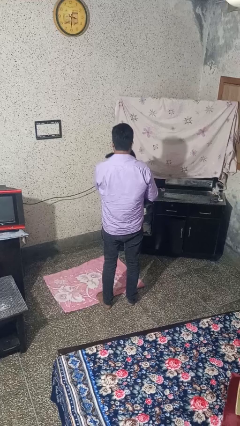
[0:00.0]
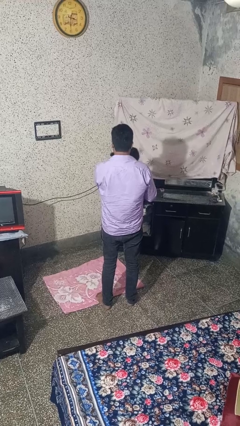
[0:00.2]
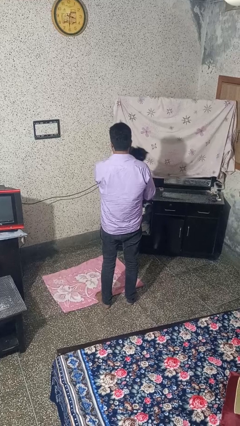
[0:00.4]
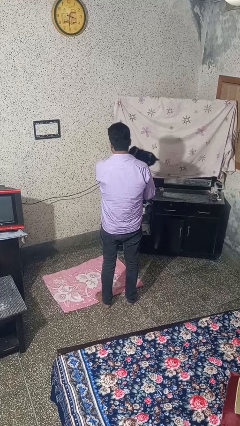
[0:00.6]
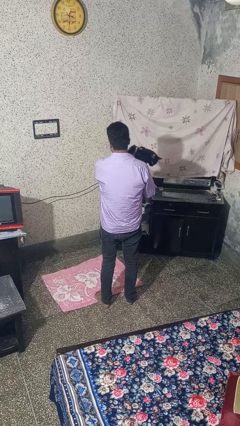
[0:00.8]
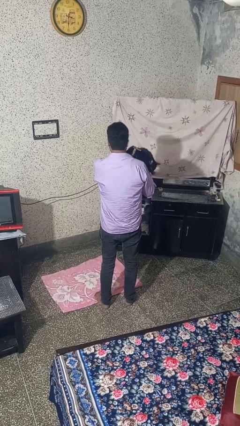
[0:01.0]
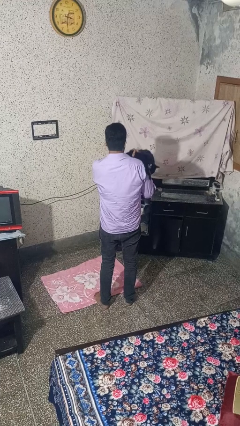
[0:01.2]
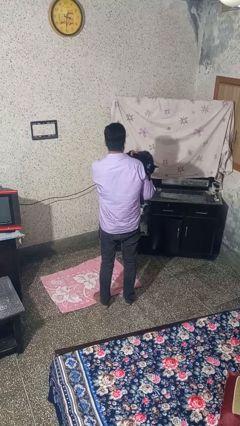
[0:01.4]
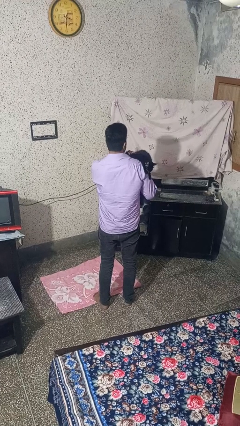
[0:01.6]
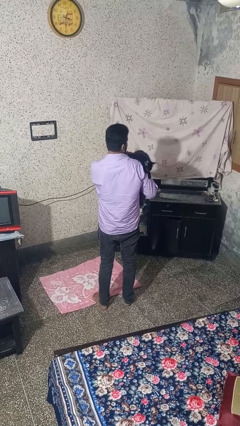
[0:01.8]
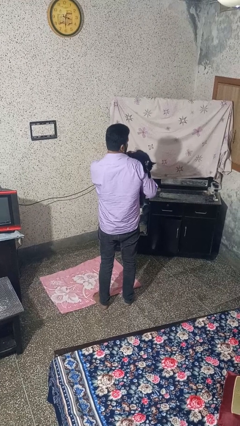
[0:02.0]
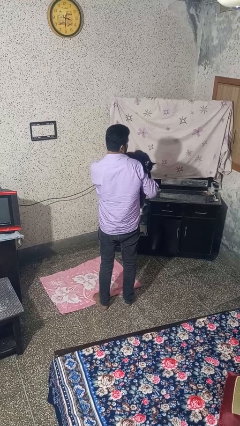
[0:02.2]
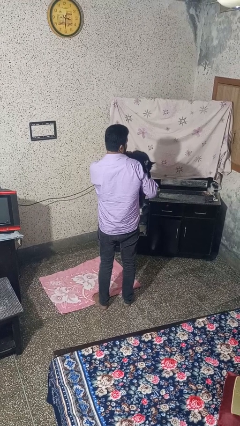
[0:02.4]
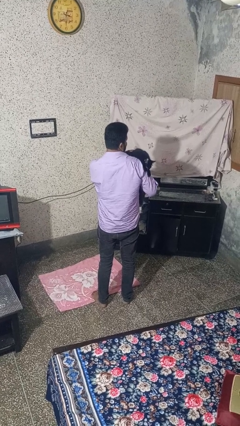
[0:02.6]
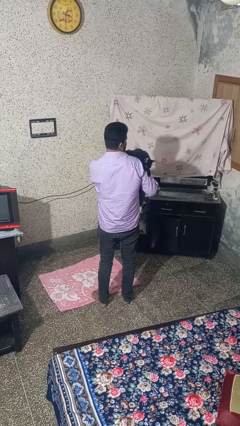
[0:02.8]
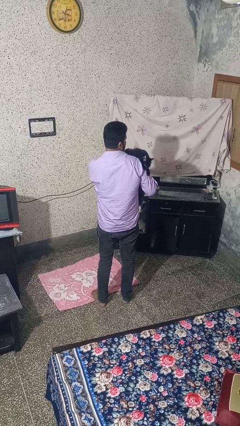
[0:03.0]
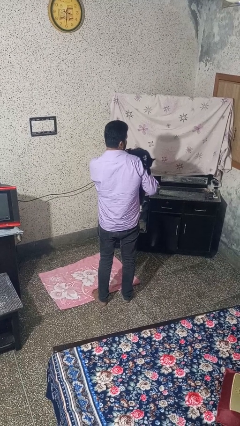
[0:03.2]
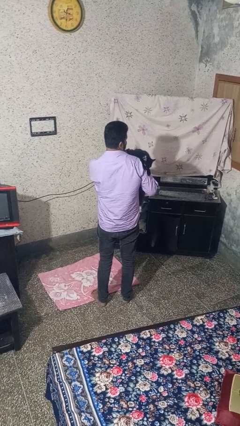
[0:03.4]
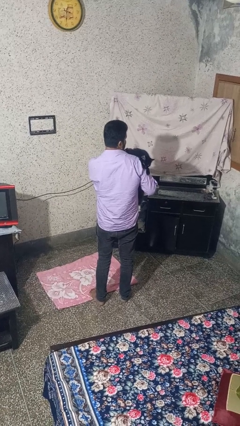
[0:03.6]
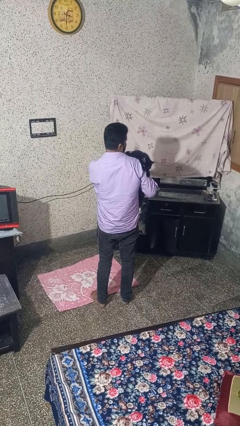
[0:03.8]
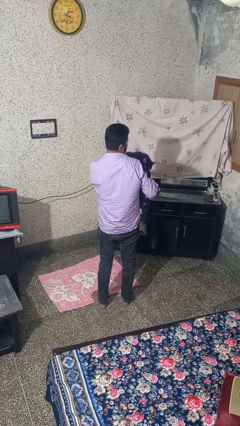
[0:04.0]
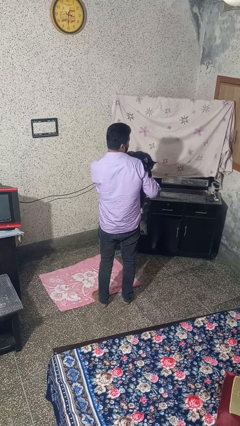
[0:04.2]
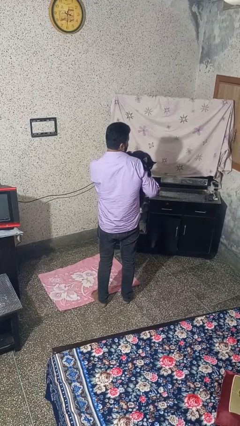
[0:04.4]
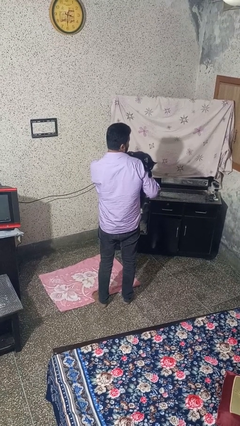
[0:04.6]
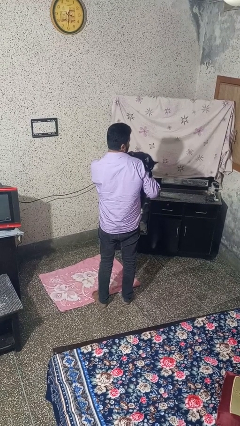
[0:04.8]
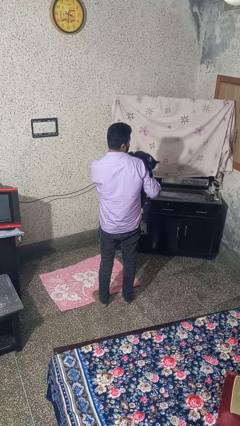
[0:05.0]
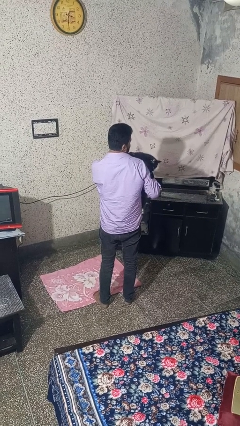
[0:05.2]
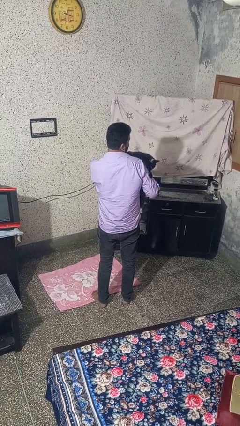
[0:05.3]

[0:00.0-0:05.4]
person hugs cat

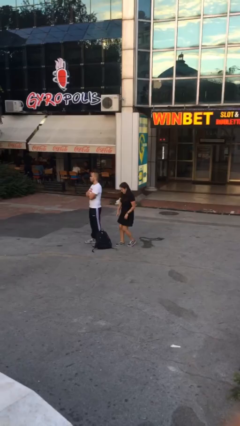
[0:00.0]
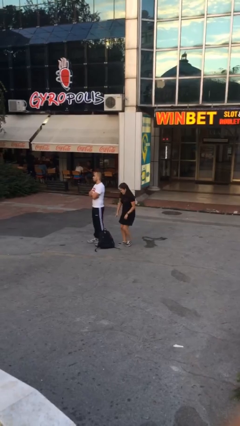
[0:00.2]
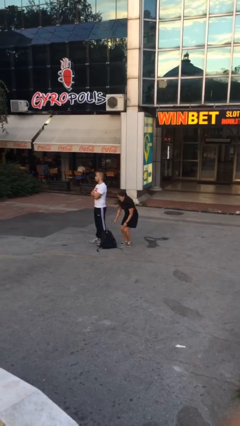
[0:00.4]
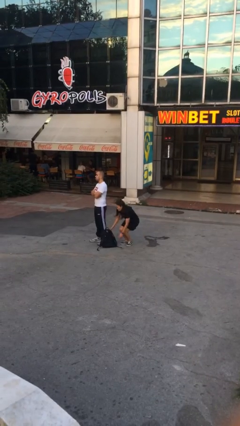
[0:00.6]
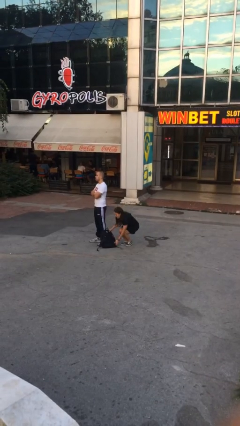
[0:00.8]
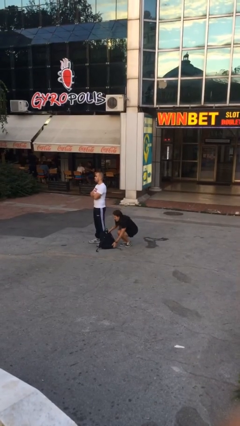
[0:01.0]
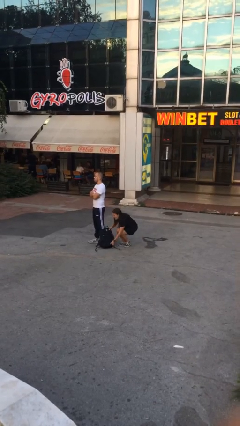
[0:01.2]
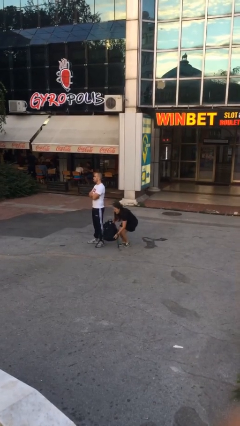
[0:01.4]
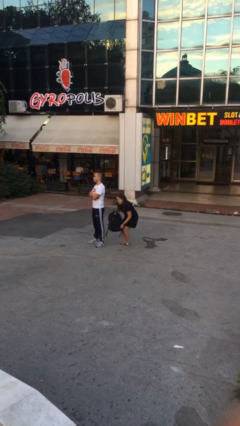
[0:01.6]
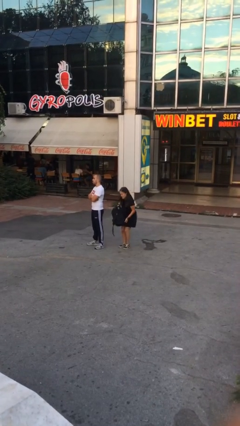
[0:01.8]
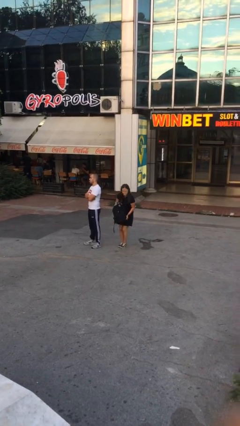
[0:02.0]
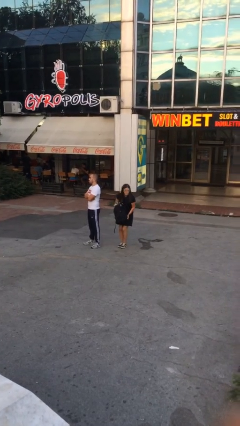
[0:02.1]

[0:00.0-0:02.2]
person steals object from person

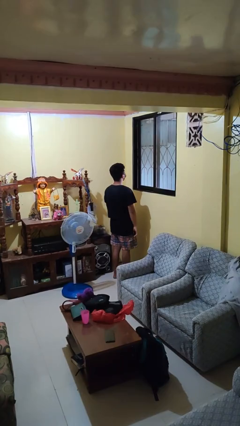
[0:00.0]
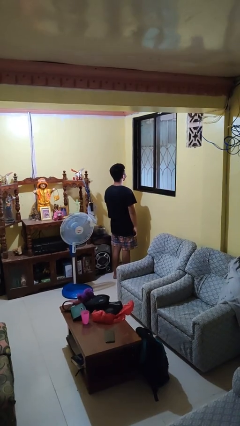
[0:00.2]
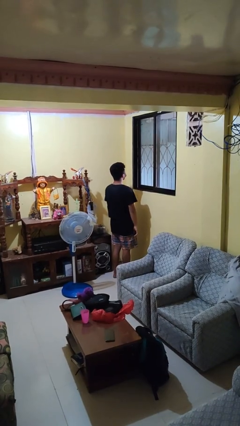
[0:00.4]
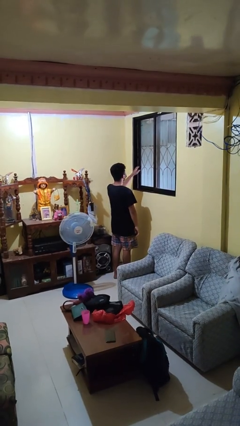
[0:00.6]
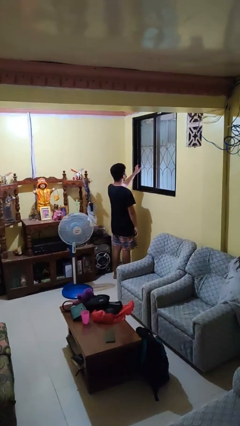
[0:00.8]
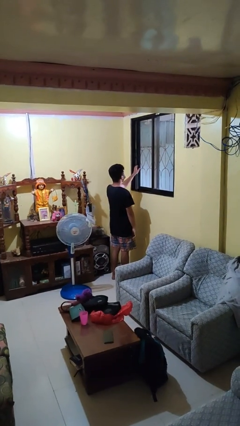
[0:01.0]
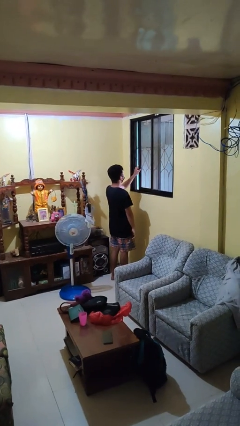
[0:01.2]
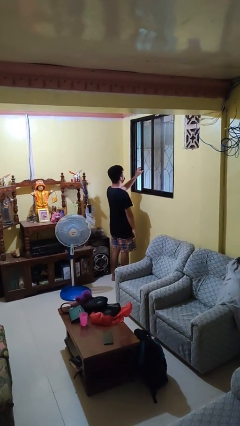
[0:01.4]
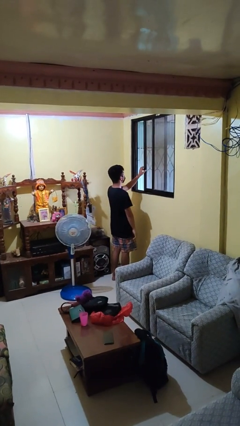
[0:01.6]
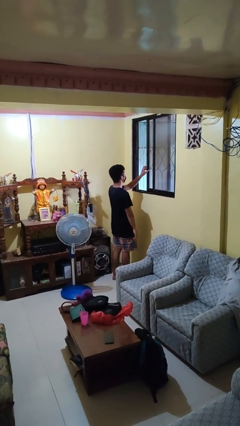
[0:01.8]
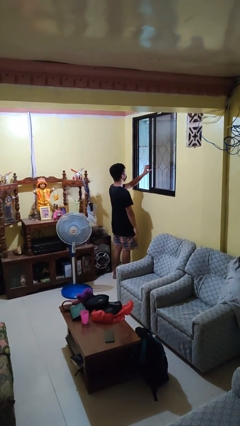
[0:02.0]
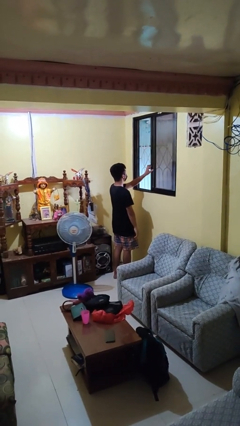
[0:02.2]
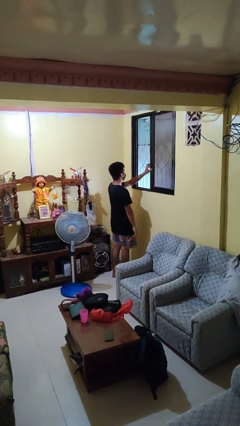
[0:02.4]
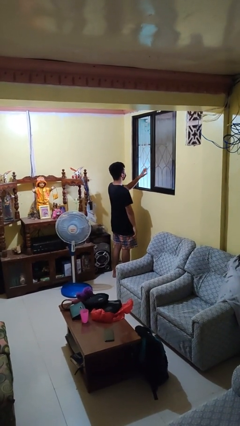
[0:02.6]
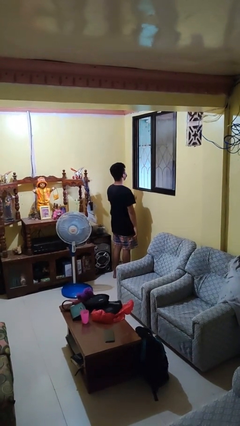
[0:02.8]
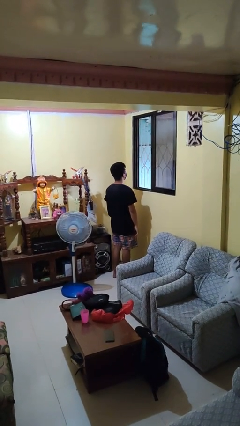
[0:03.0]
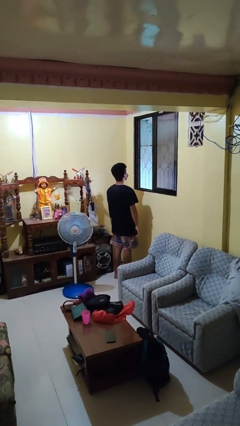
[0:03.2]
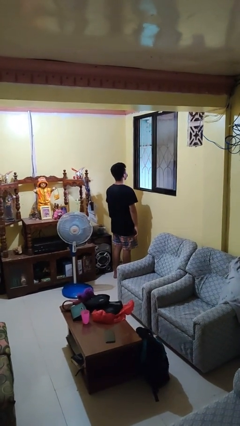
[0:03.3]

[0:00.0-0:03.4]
person opens home window

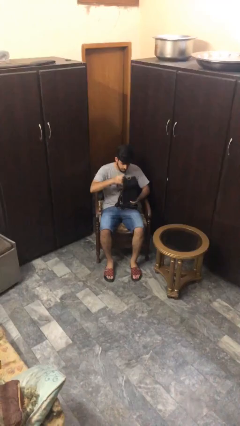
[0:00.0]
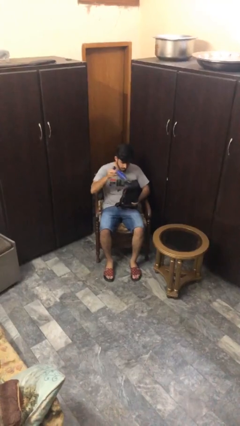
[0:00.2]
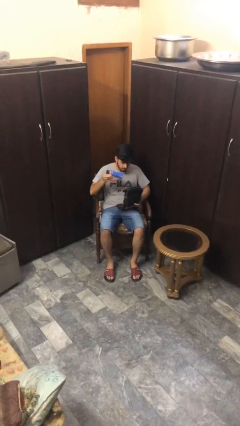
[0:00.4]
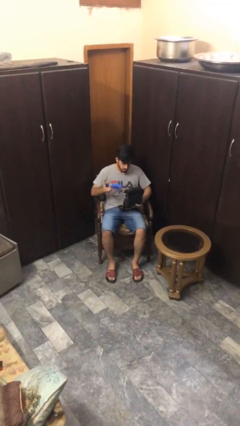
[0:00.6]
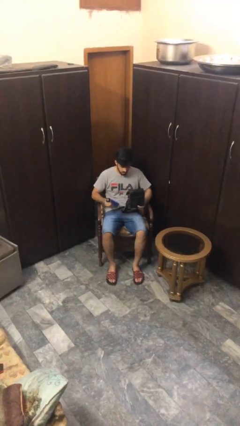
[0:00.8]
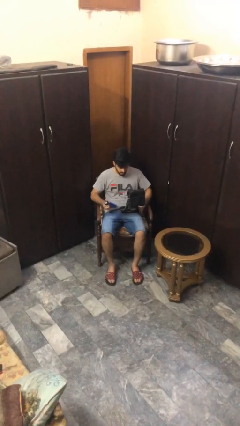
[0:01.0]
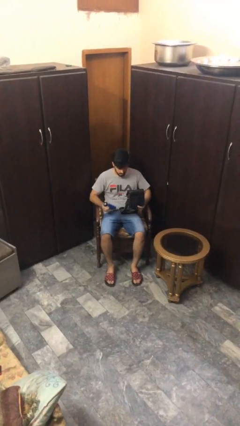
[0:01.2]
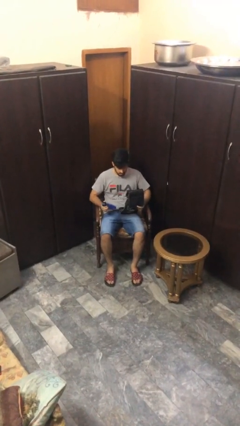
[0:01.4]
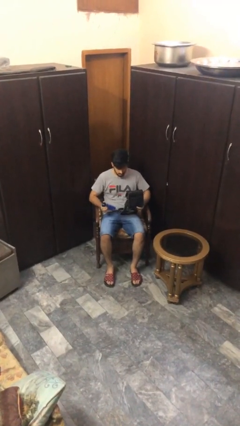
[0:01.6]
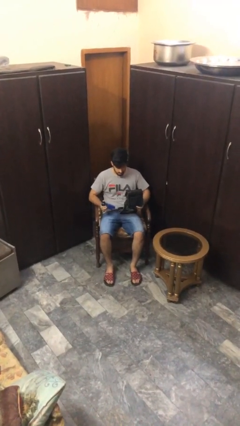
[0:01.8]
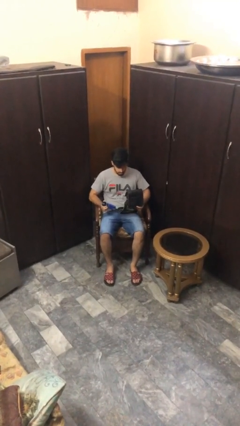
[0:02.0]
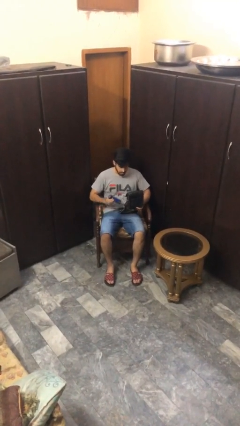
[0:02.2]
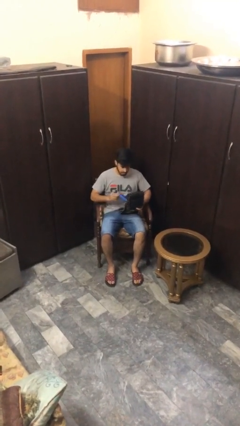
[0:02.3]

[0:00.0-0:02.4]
person takes object from purse

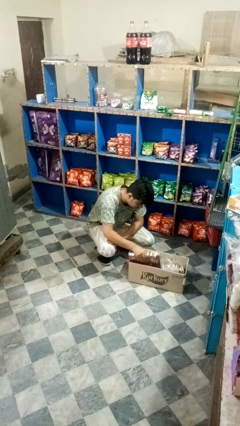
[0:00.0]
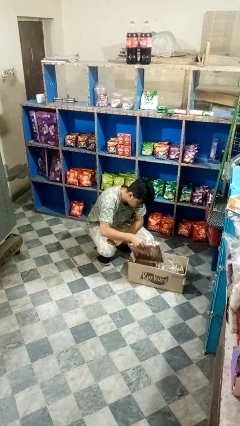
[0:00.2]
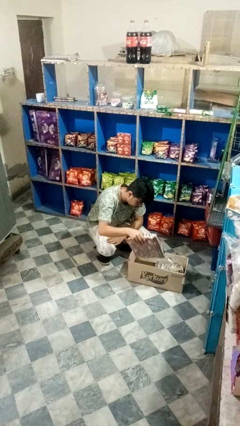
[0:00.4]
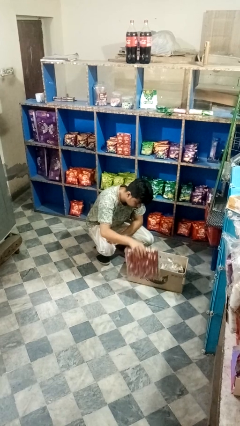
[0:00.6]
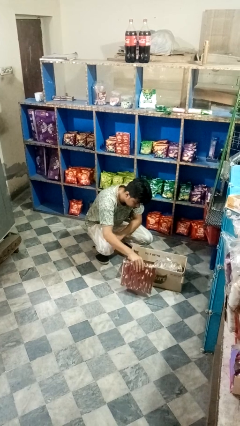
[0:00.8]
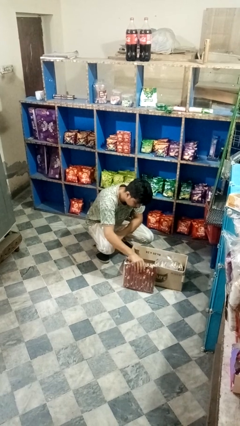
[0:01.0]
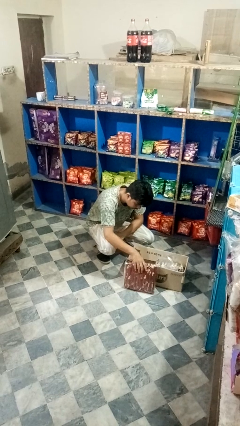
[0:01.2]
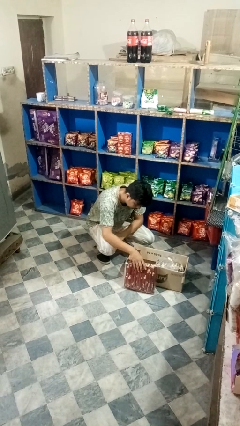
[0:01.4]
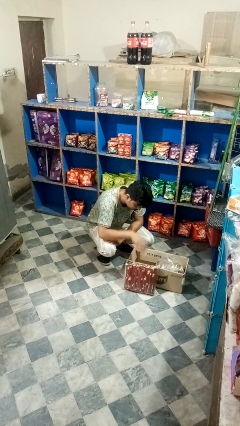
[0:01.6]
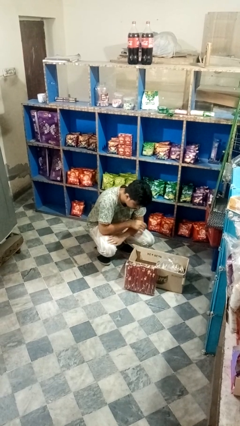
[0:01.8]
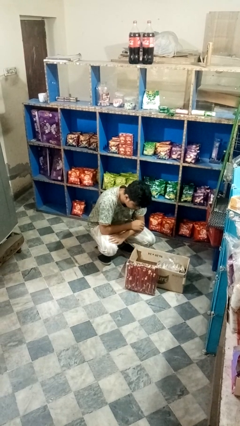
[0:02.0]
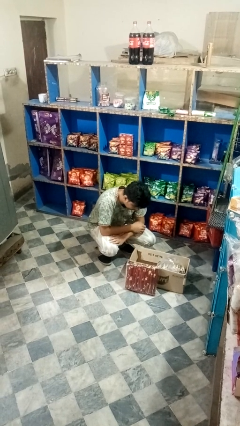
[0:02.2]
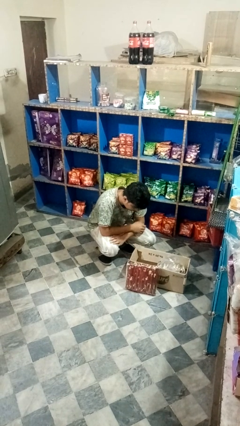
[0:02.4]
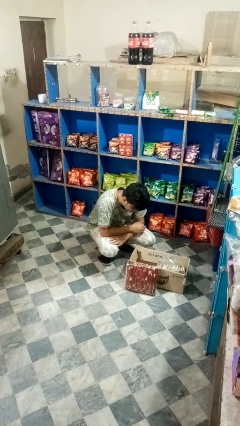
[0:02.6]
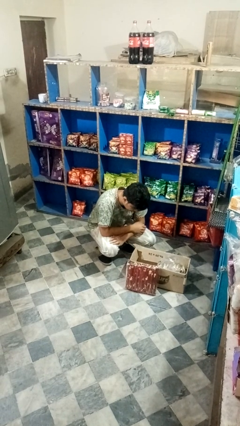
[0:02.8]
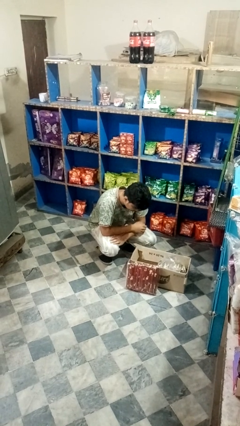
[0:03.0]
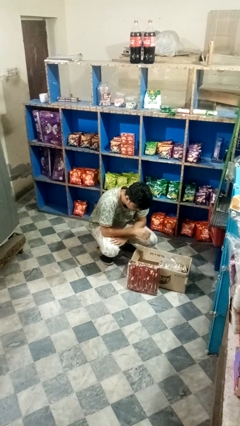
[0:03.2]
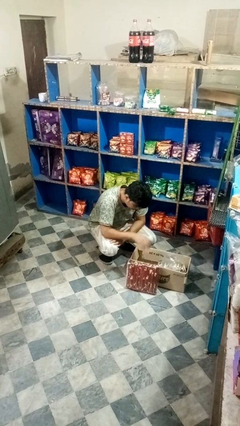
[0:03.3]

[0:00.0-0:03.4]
person takes object from box

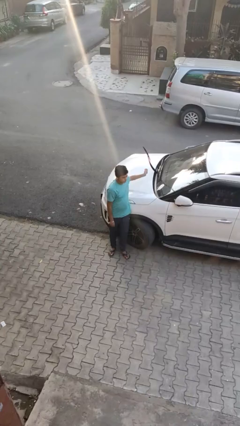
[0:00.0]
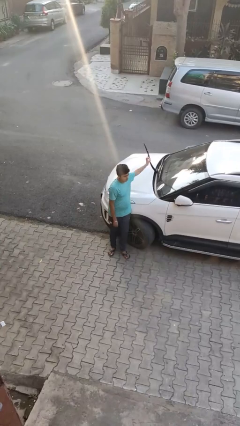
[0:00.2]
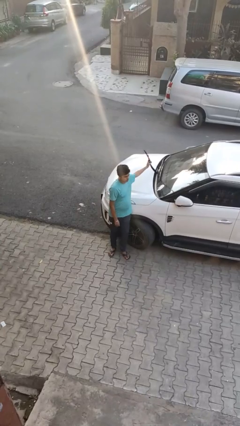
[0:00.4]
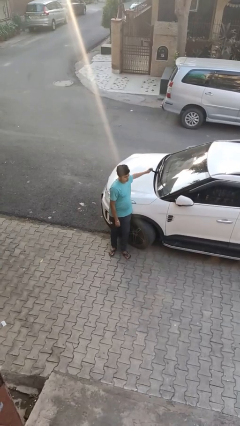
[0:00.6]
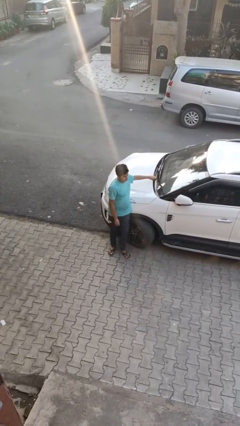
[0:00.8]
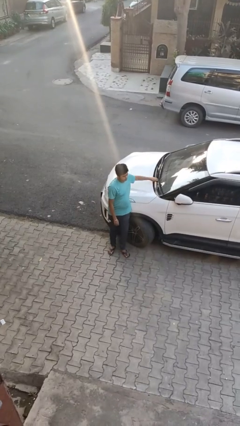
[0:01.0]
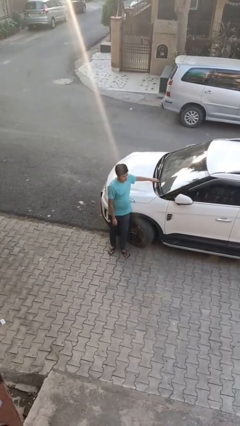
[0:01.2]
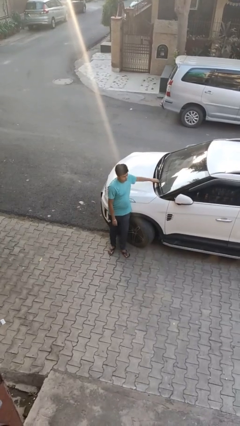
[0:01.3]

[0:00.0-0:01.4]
person flips down car wipers
